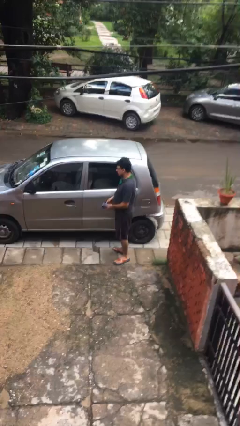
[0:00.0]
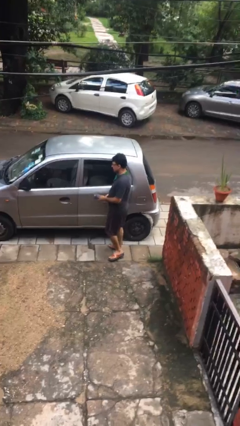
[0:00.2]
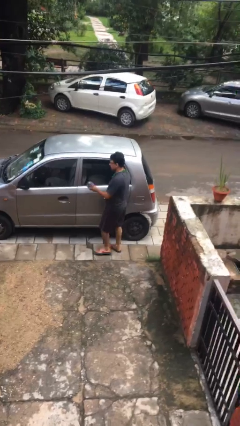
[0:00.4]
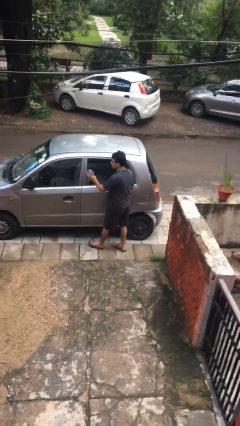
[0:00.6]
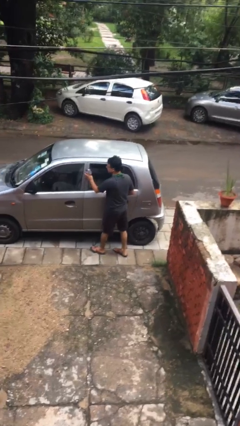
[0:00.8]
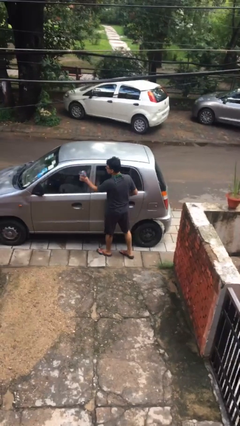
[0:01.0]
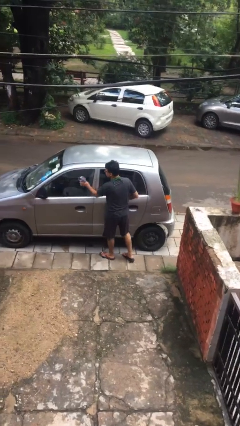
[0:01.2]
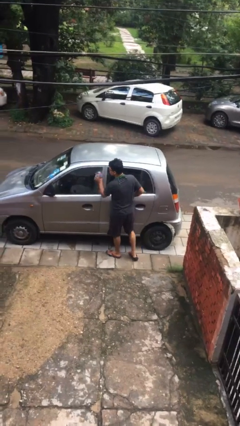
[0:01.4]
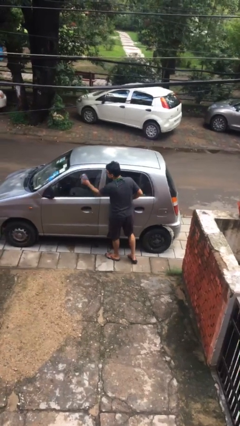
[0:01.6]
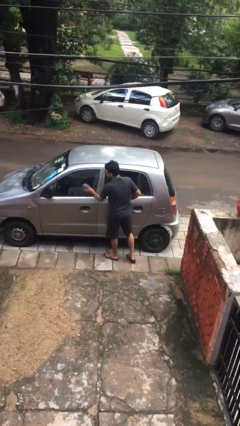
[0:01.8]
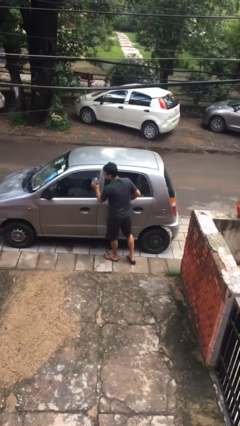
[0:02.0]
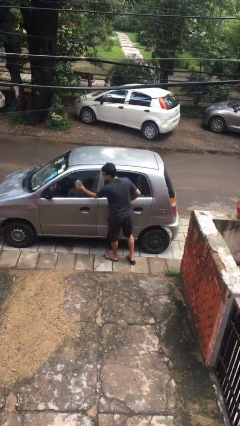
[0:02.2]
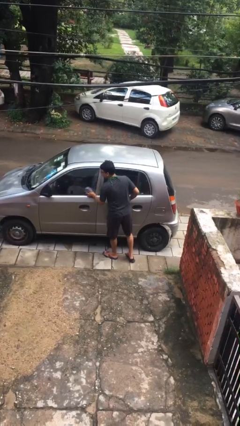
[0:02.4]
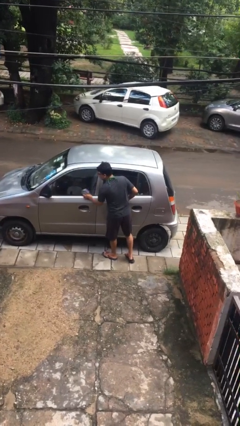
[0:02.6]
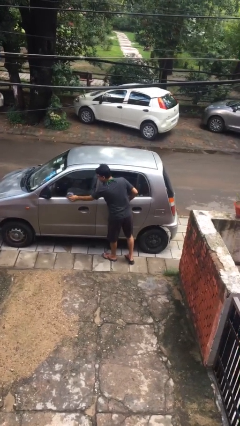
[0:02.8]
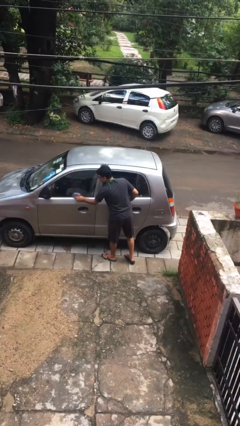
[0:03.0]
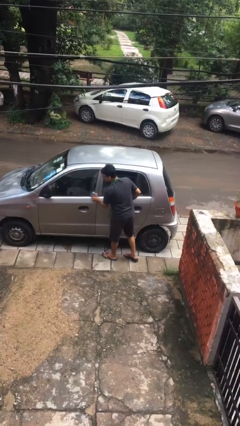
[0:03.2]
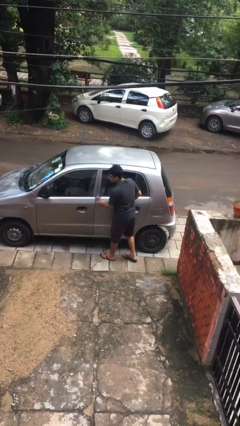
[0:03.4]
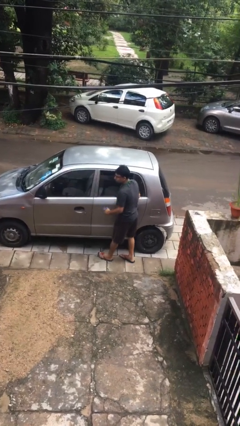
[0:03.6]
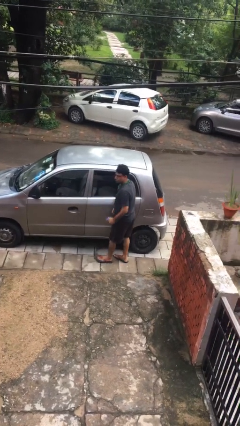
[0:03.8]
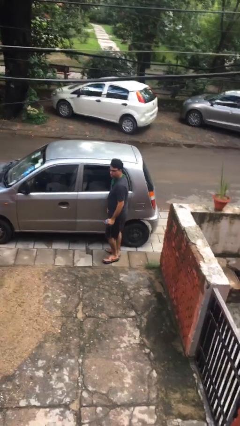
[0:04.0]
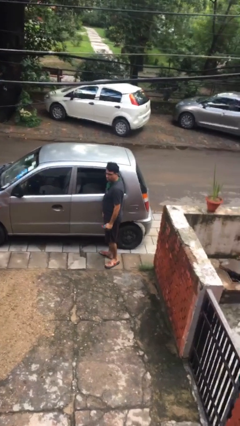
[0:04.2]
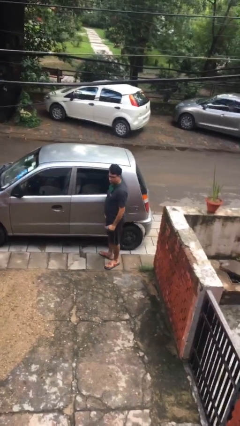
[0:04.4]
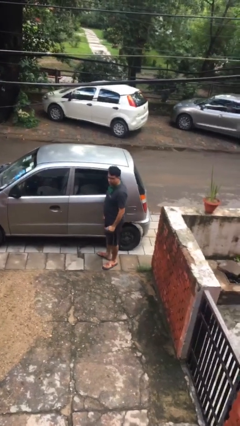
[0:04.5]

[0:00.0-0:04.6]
person polishes car with rag

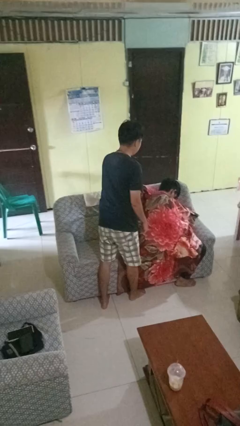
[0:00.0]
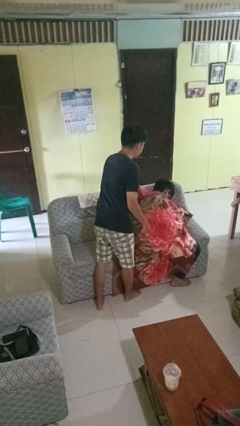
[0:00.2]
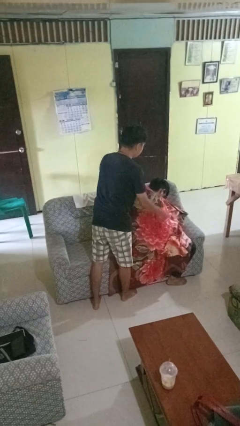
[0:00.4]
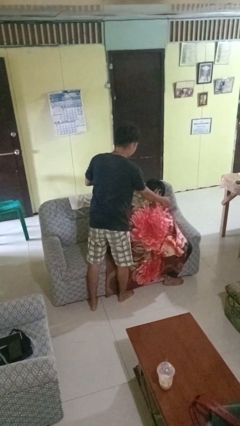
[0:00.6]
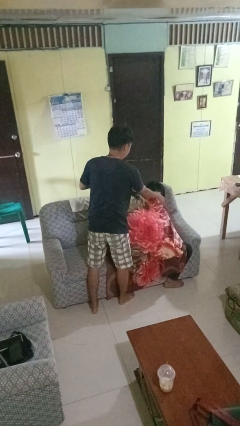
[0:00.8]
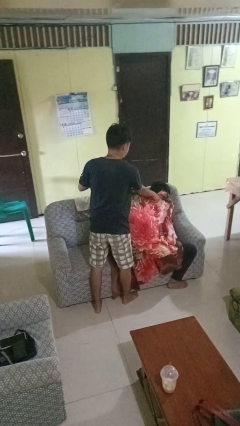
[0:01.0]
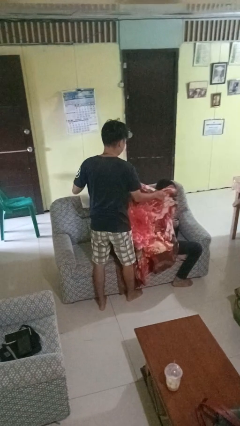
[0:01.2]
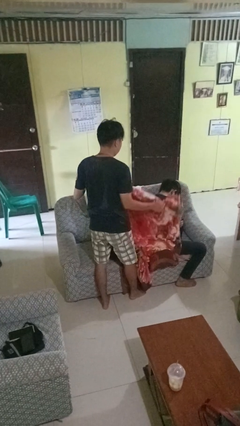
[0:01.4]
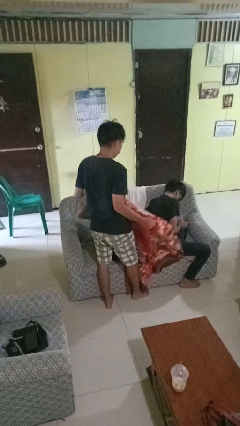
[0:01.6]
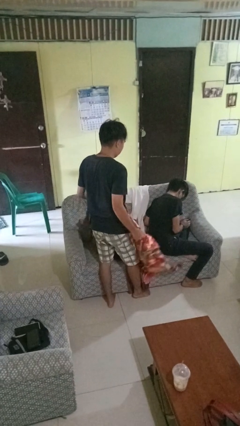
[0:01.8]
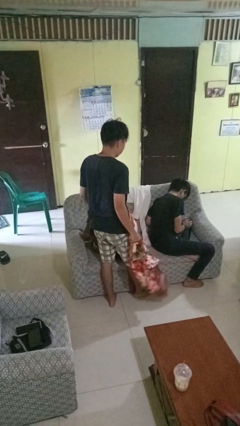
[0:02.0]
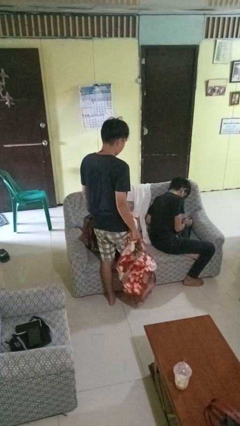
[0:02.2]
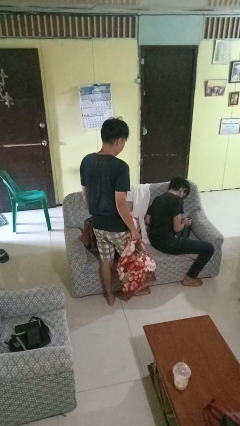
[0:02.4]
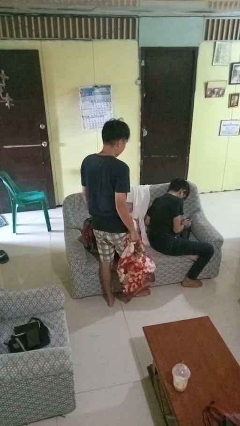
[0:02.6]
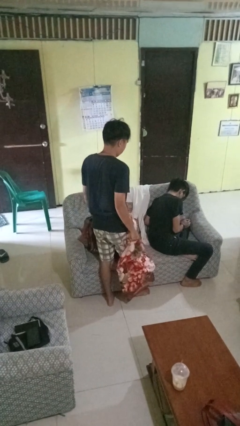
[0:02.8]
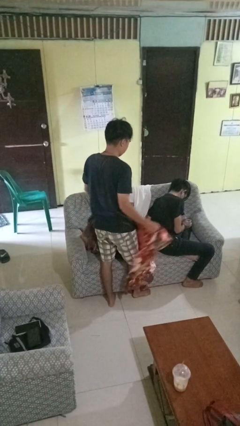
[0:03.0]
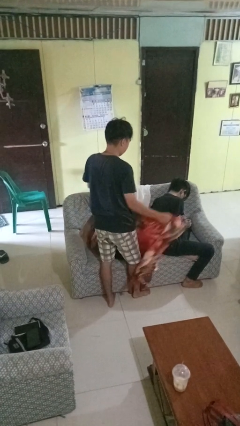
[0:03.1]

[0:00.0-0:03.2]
person uncovers friend with blanket

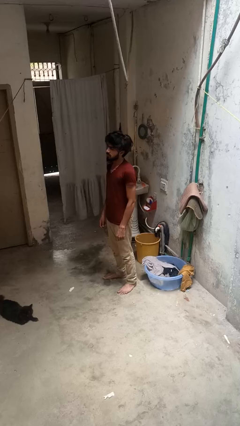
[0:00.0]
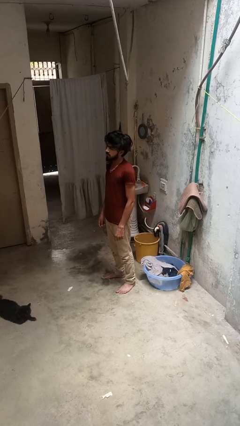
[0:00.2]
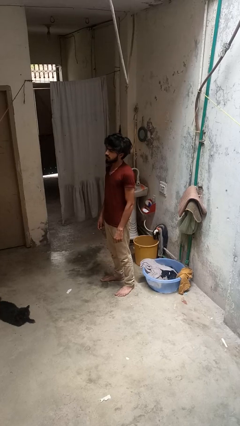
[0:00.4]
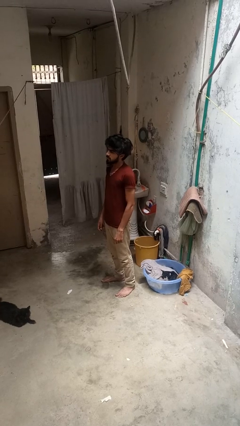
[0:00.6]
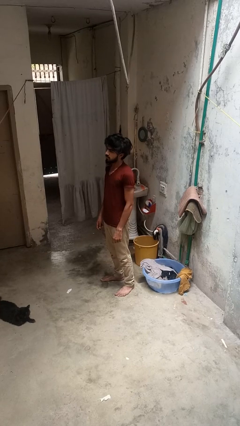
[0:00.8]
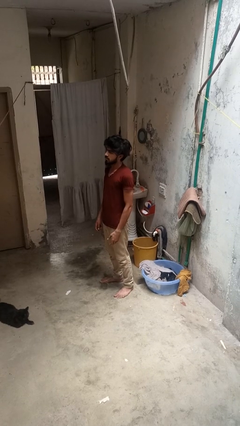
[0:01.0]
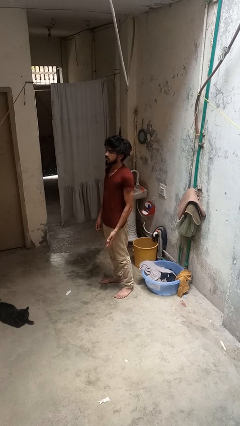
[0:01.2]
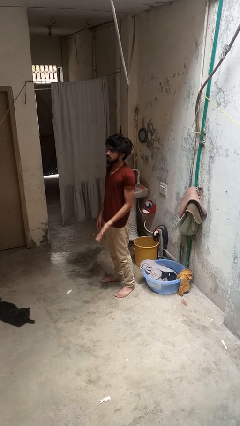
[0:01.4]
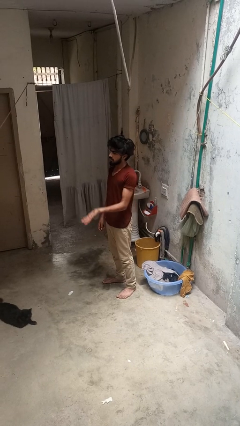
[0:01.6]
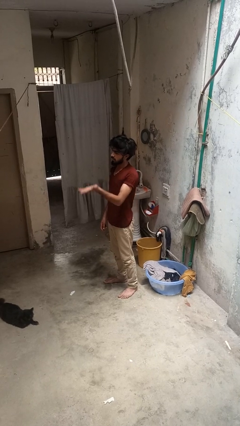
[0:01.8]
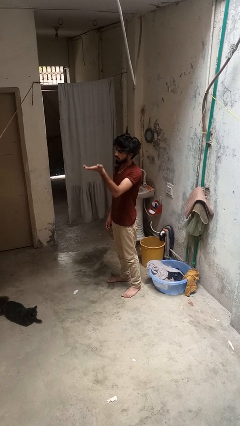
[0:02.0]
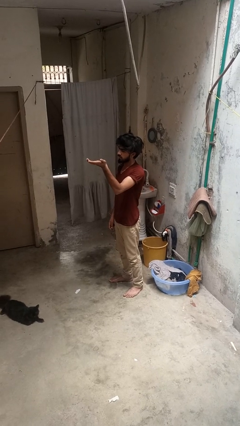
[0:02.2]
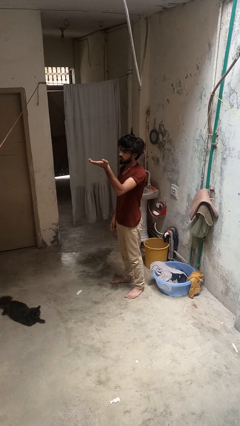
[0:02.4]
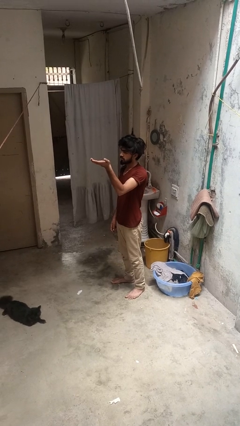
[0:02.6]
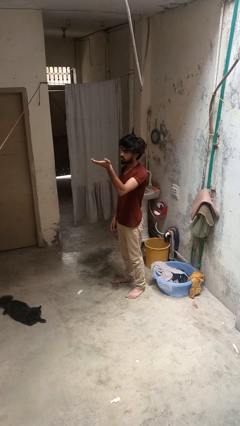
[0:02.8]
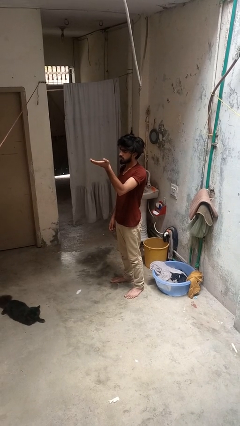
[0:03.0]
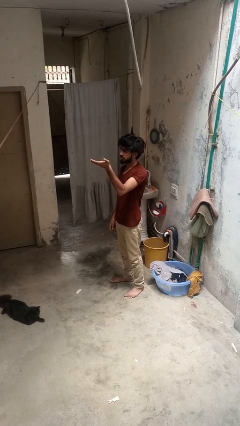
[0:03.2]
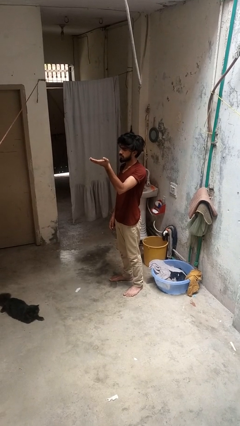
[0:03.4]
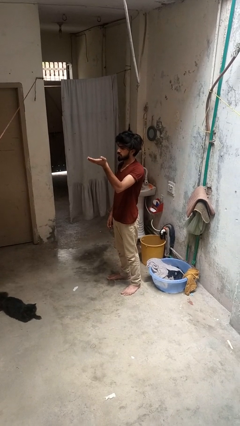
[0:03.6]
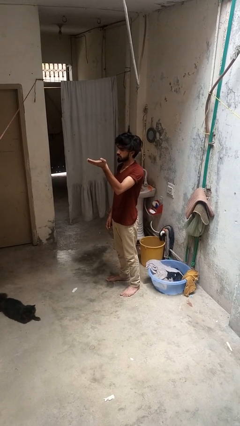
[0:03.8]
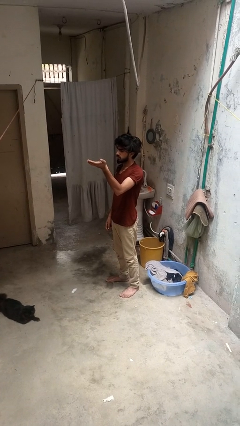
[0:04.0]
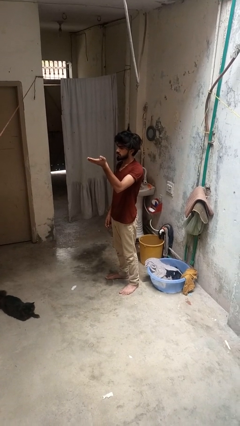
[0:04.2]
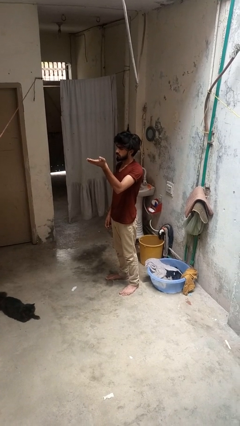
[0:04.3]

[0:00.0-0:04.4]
person gestures swipe up

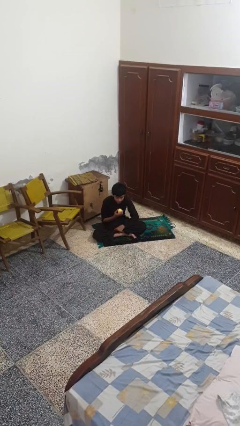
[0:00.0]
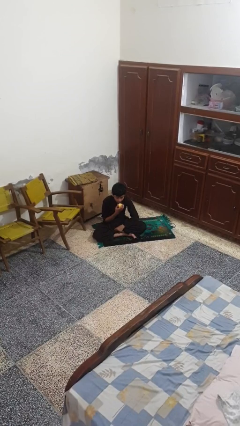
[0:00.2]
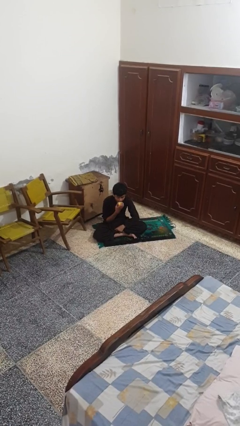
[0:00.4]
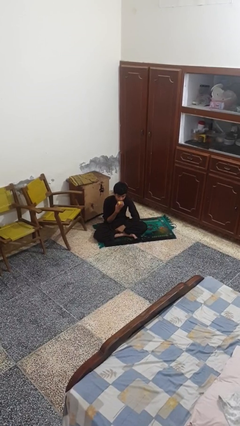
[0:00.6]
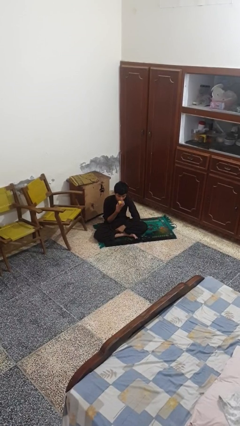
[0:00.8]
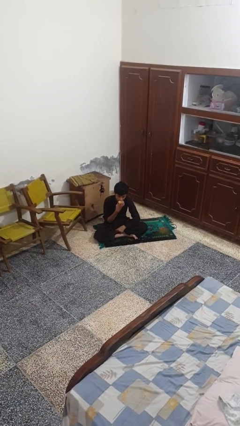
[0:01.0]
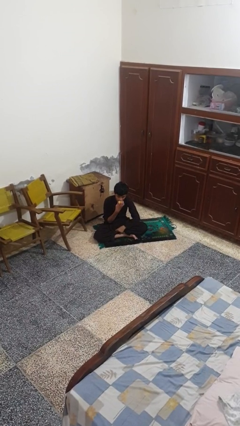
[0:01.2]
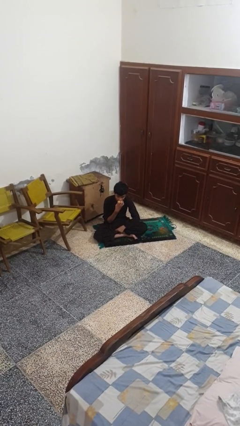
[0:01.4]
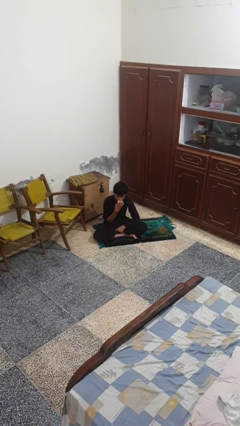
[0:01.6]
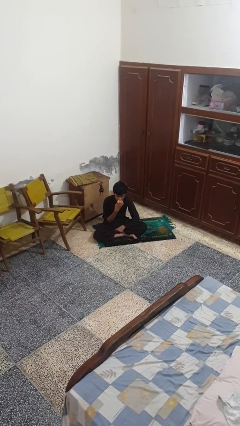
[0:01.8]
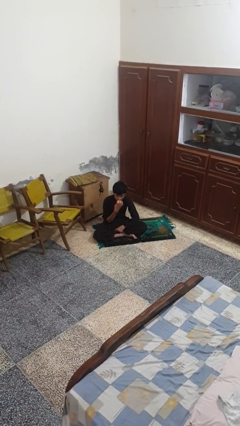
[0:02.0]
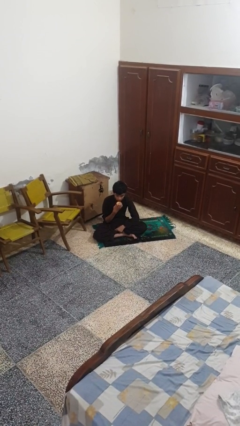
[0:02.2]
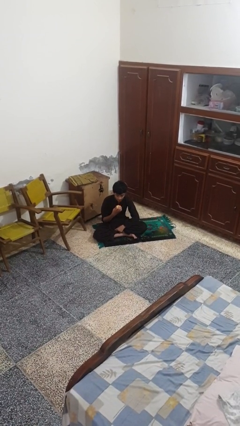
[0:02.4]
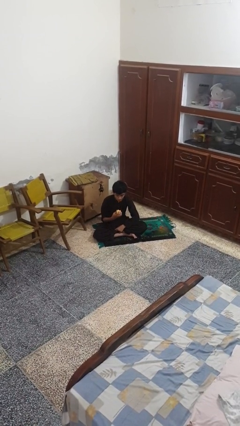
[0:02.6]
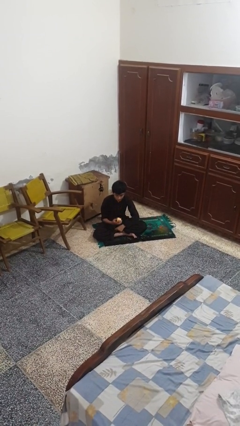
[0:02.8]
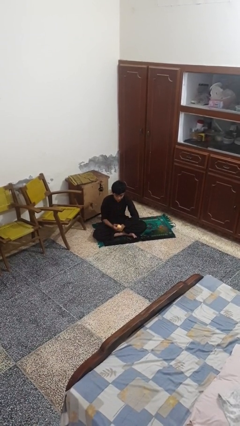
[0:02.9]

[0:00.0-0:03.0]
person eats apple

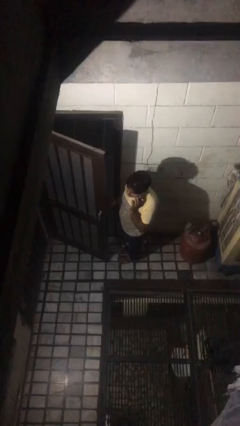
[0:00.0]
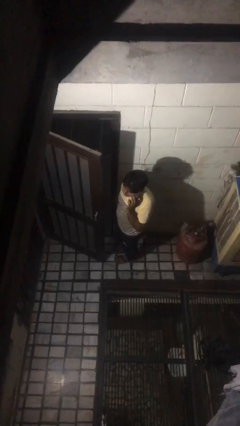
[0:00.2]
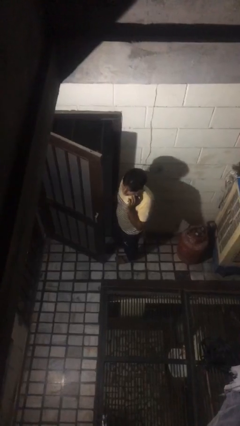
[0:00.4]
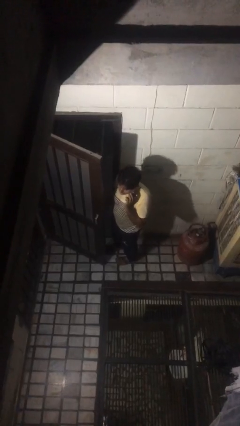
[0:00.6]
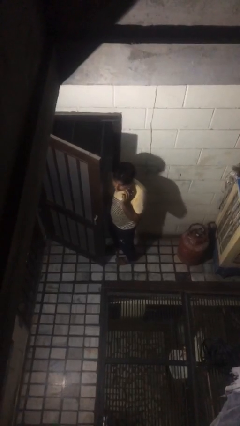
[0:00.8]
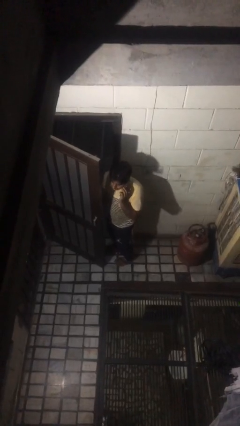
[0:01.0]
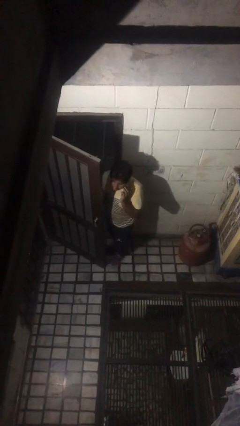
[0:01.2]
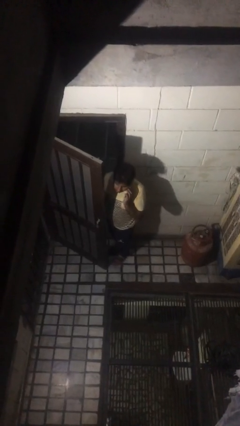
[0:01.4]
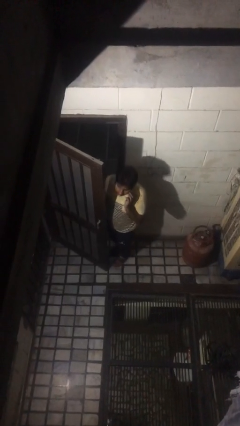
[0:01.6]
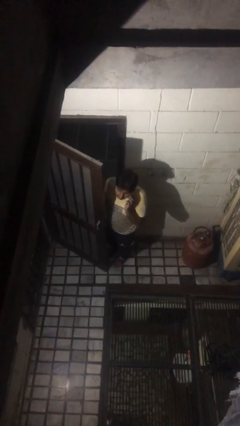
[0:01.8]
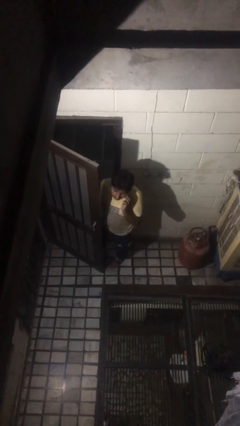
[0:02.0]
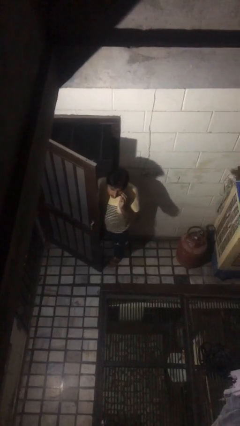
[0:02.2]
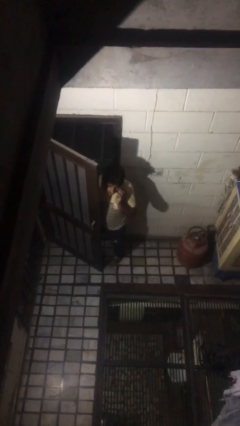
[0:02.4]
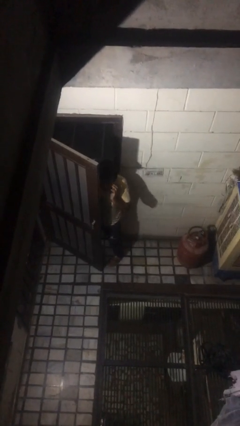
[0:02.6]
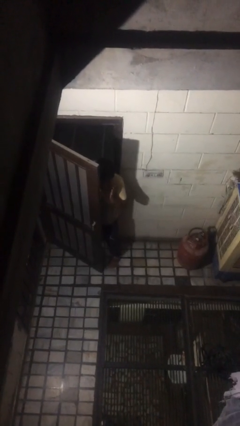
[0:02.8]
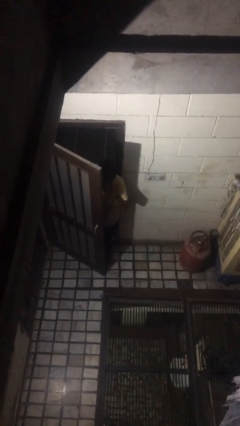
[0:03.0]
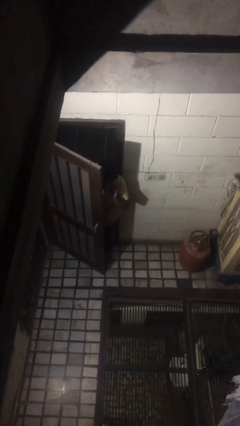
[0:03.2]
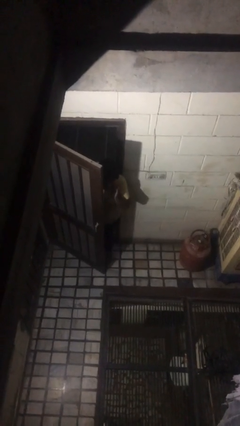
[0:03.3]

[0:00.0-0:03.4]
person exits scene through structure
